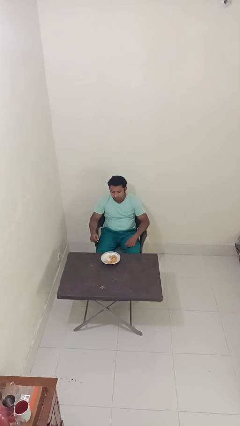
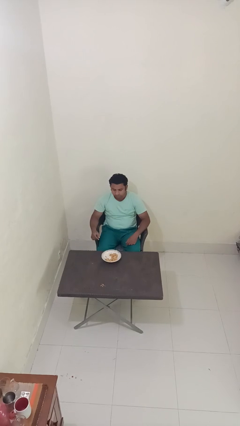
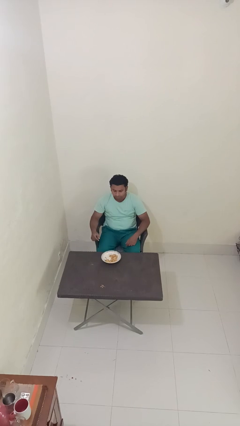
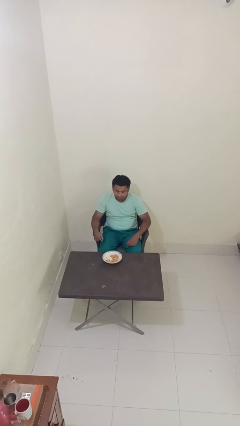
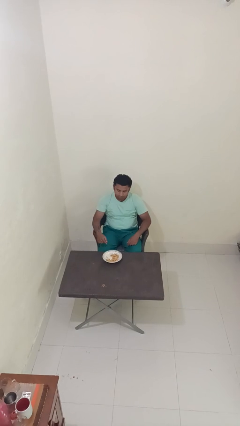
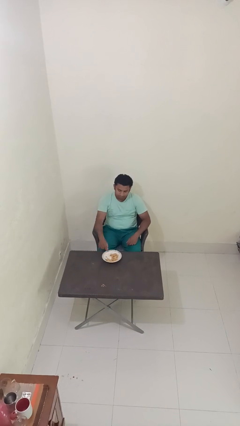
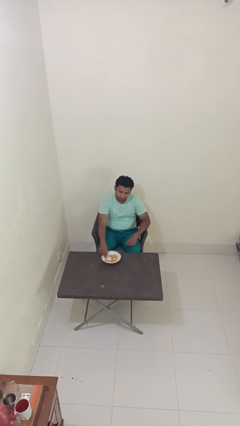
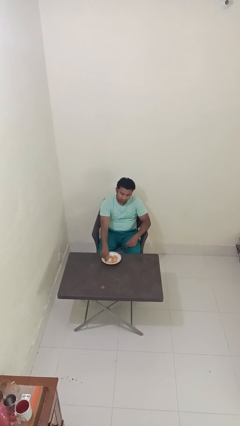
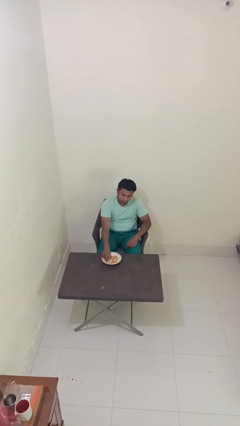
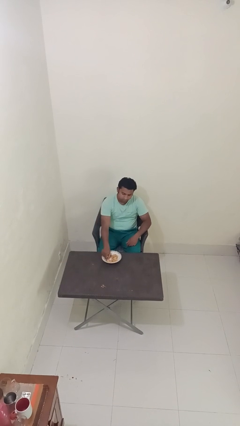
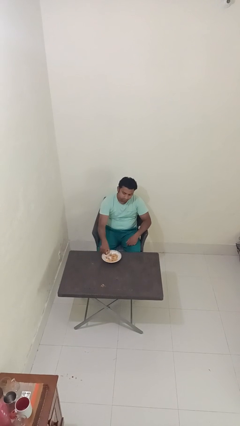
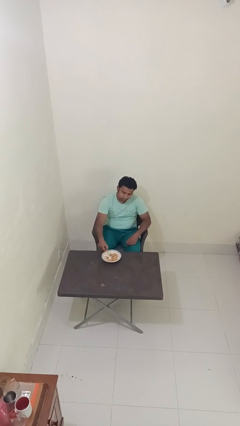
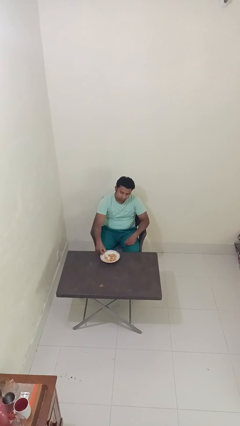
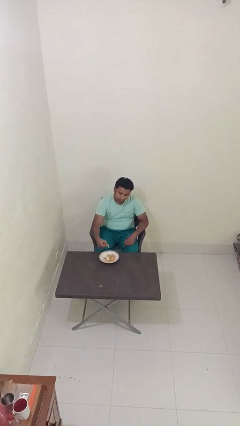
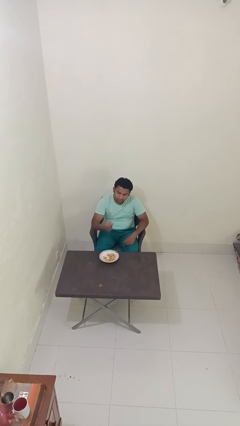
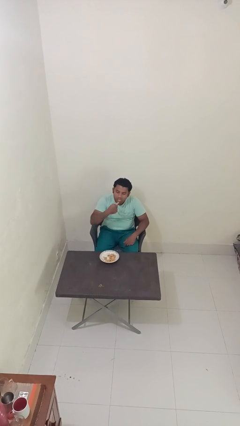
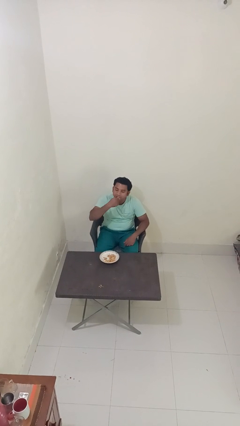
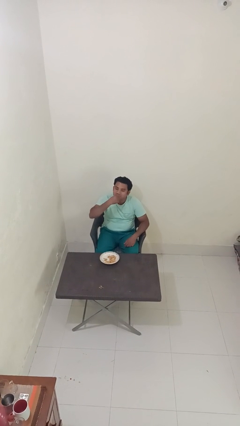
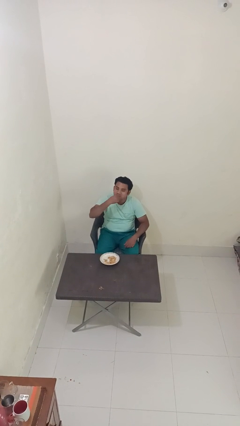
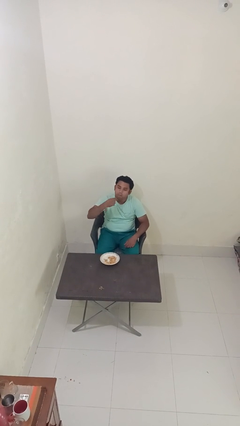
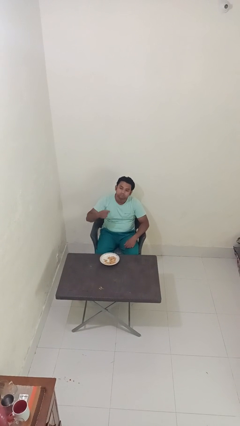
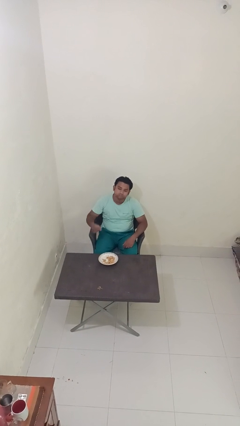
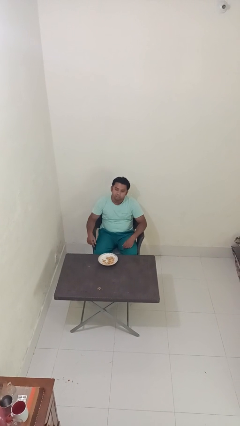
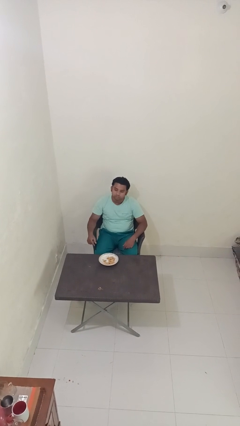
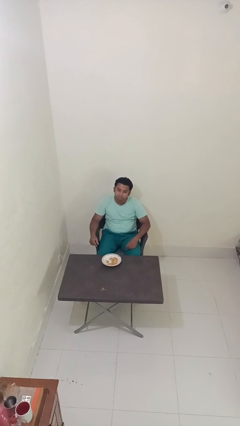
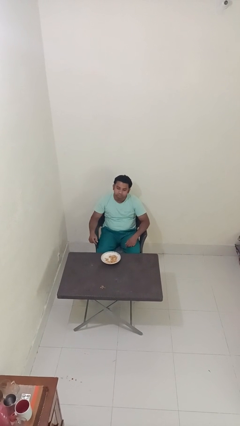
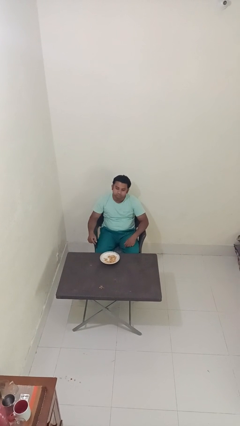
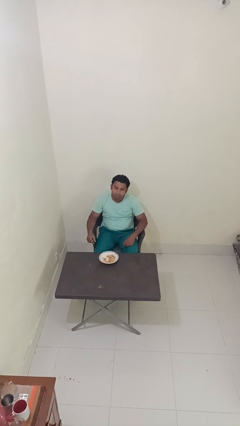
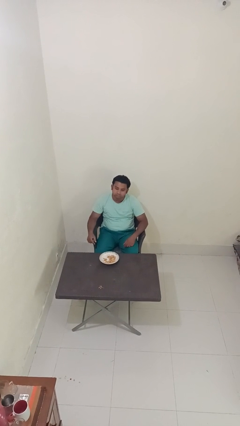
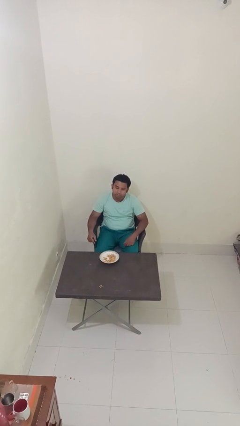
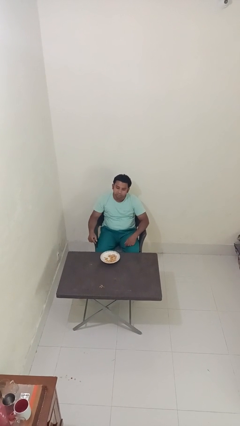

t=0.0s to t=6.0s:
person eats with hands

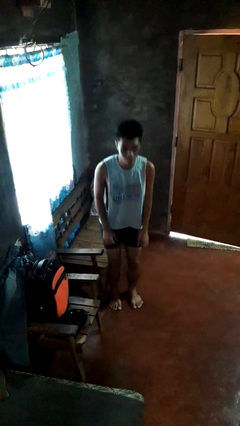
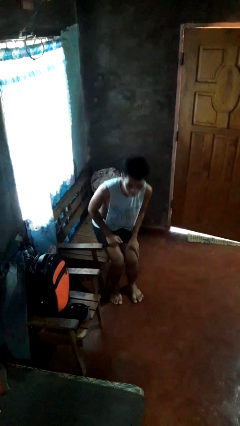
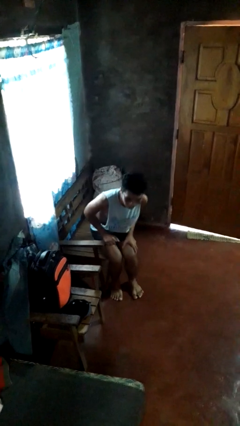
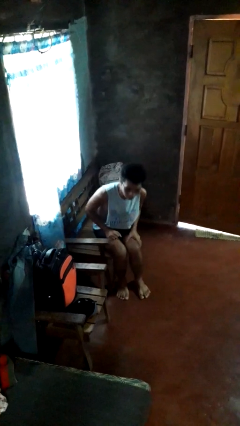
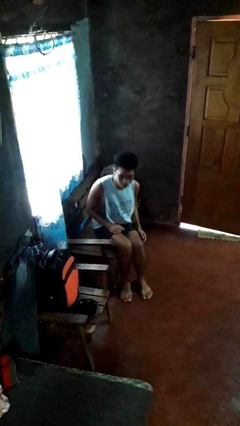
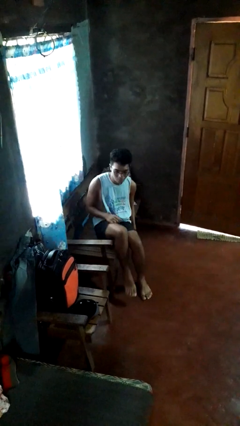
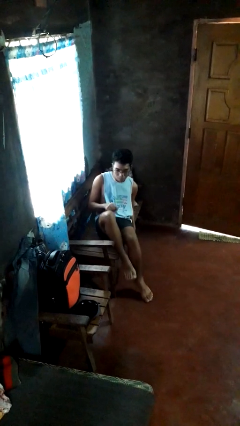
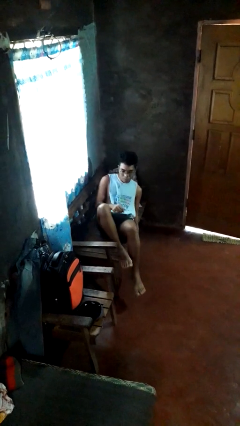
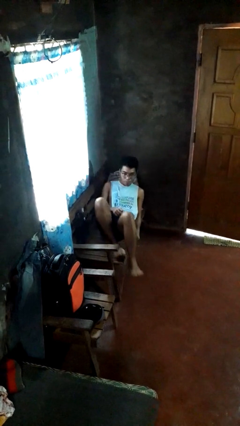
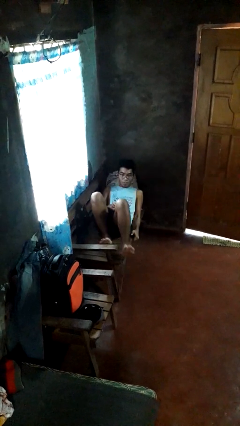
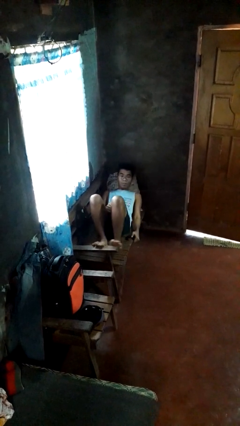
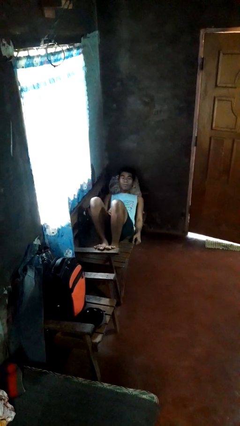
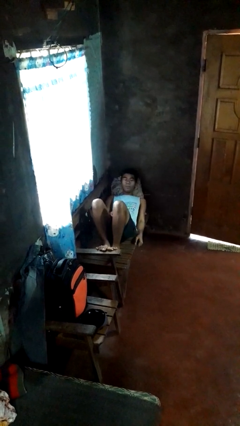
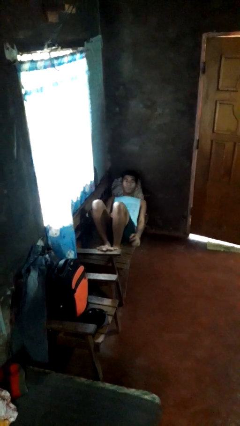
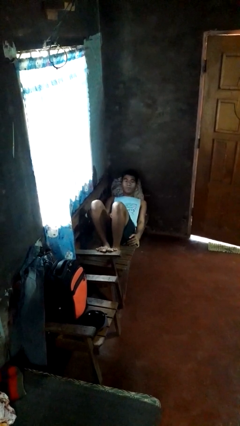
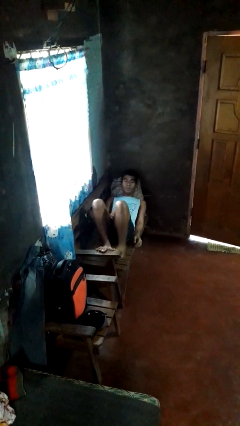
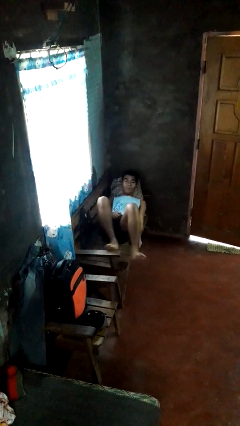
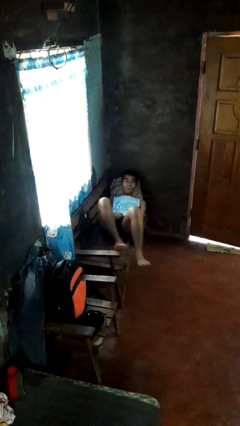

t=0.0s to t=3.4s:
person lies down on couch

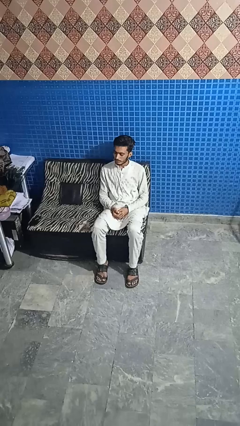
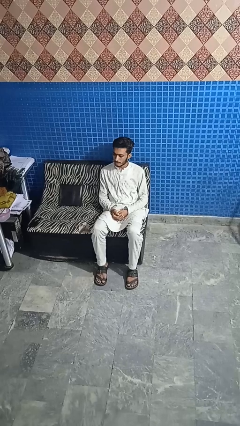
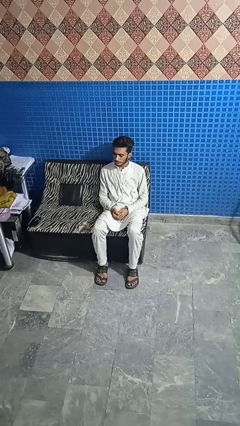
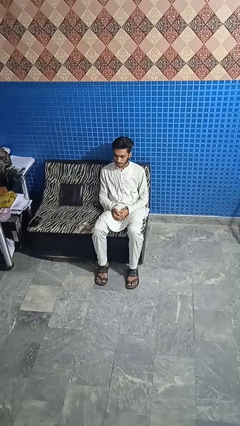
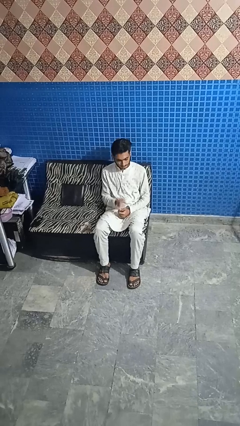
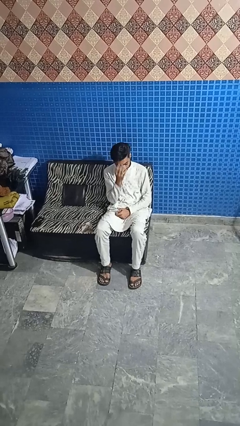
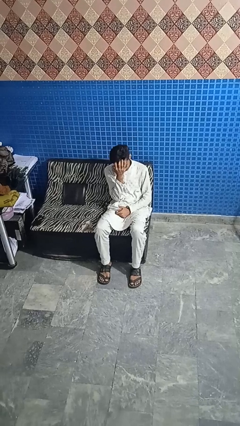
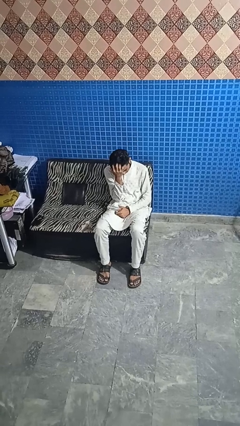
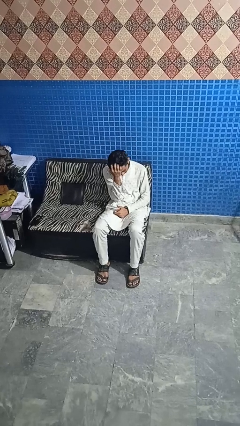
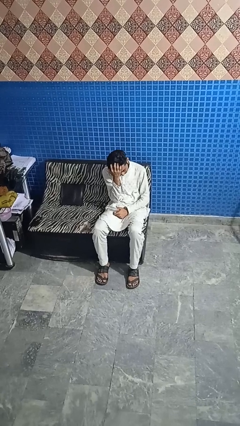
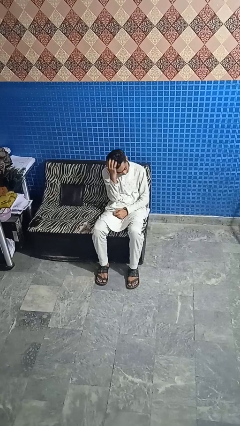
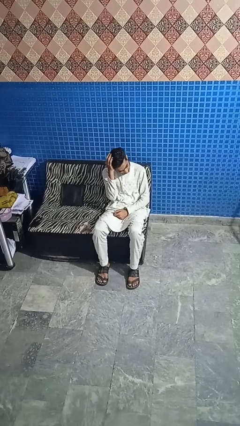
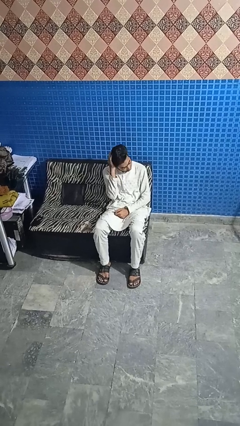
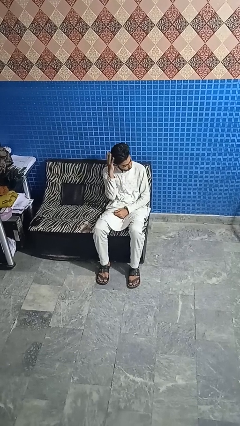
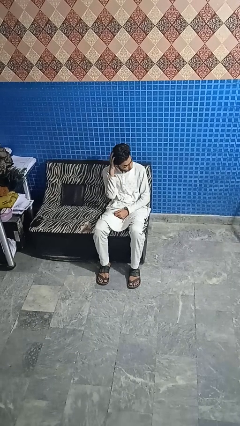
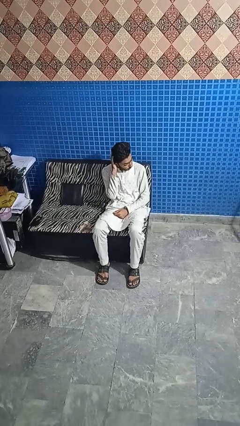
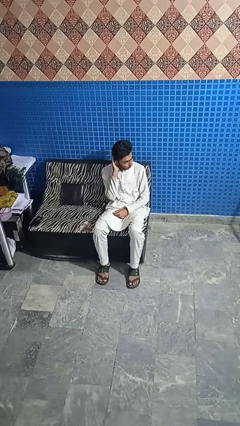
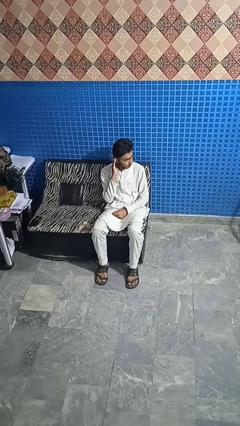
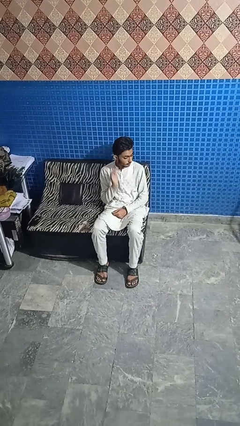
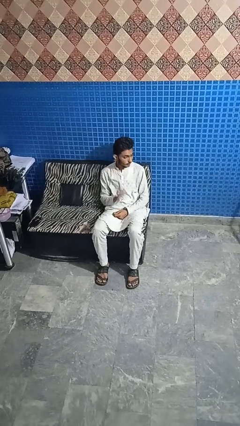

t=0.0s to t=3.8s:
person strokes hair

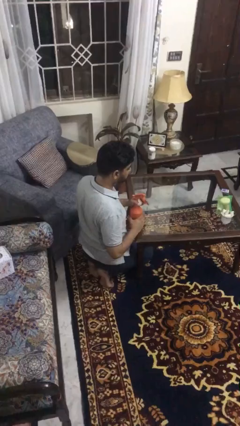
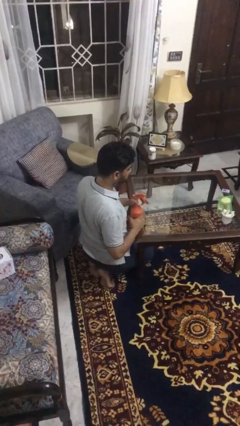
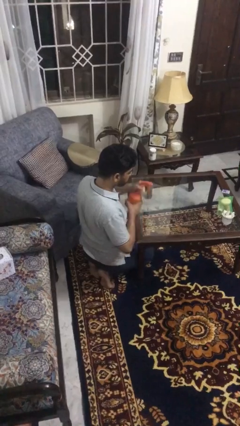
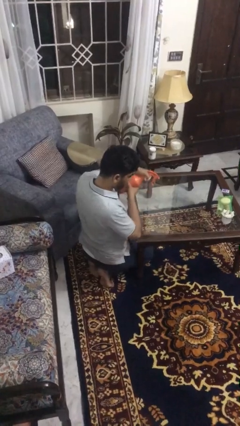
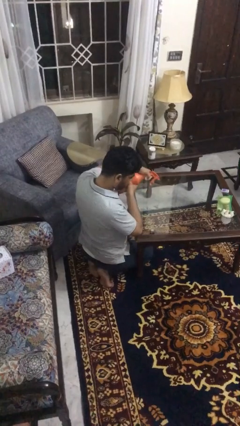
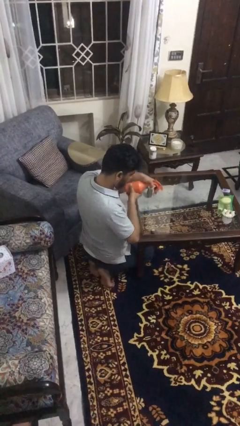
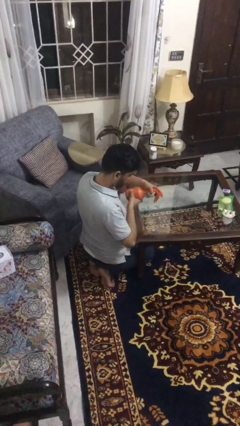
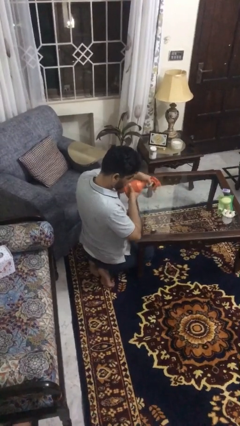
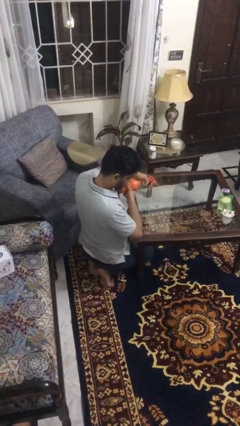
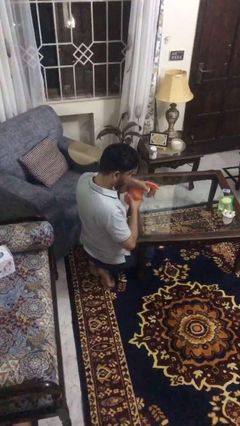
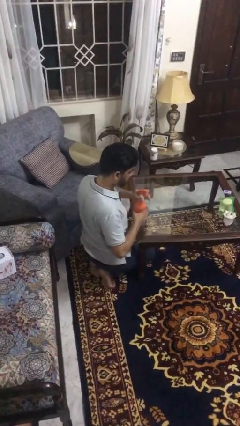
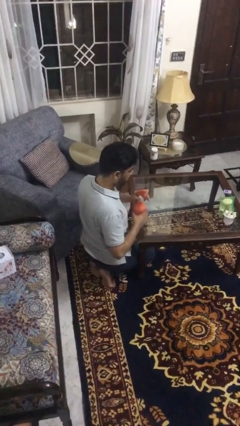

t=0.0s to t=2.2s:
person sprays from bottle

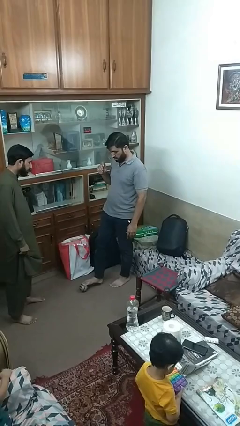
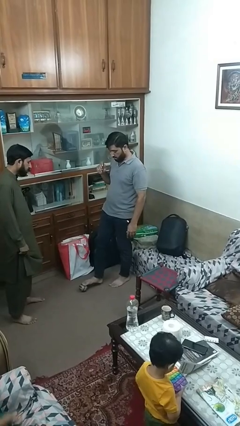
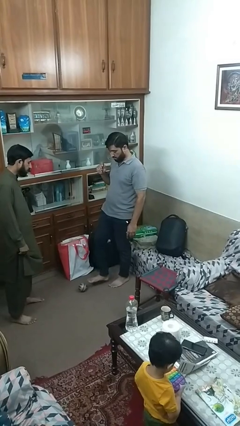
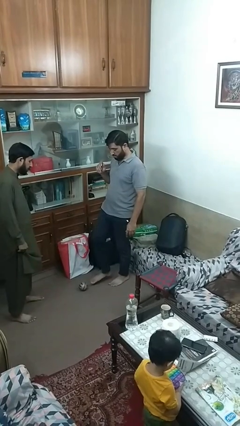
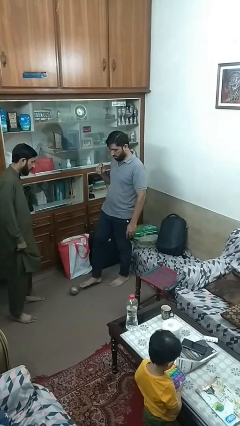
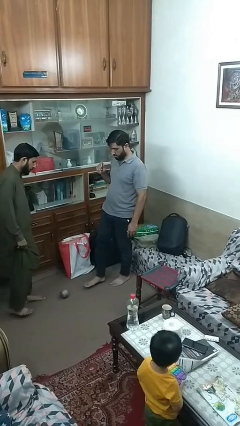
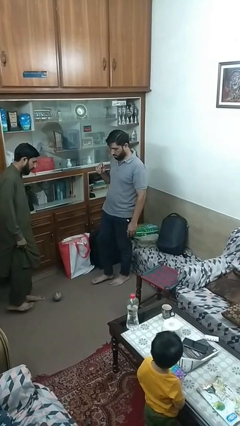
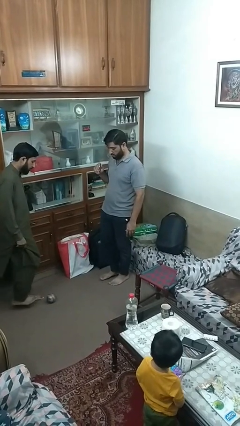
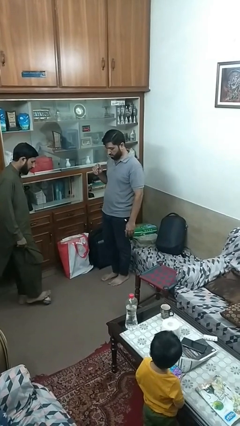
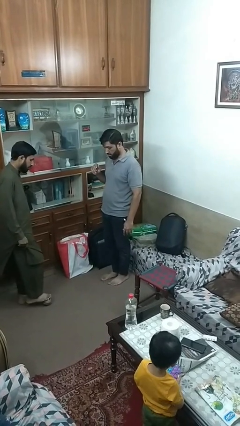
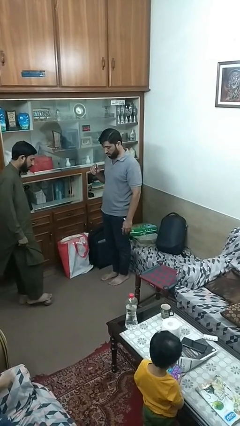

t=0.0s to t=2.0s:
person kicks object to person

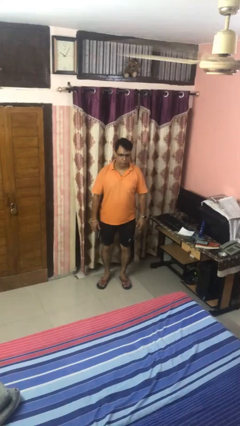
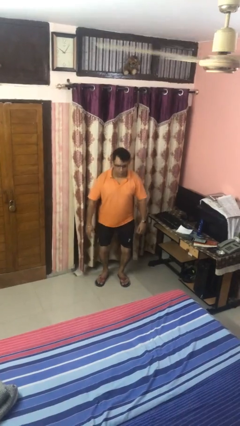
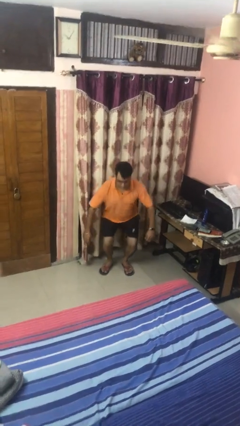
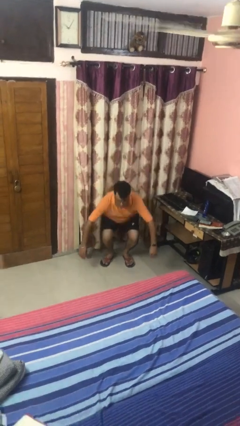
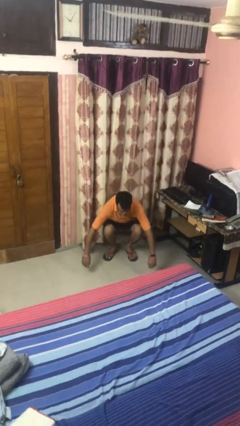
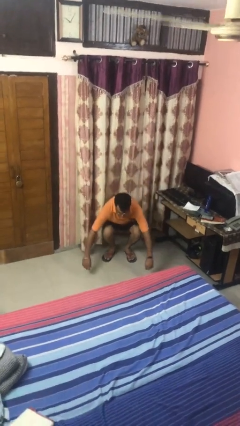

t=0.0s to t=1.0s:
person squats
